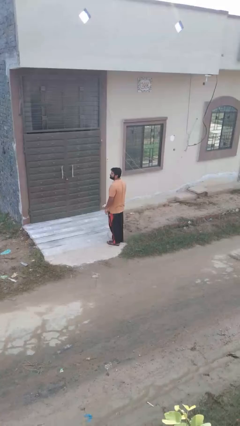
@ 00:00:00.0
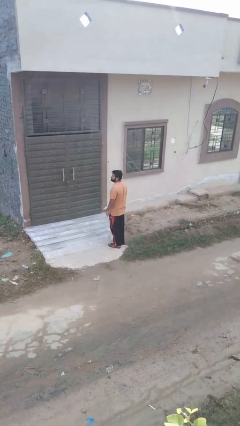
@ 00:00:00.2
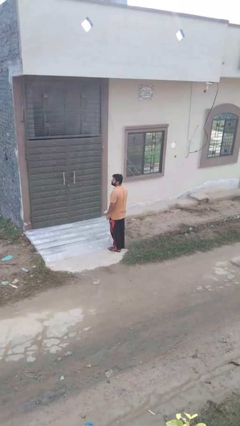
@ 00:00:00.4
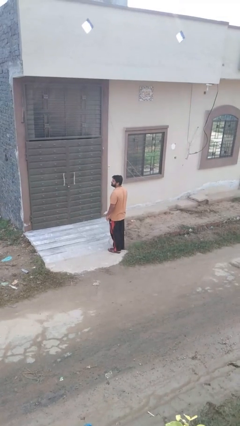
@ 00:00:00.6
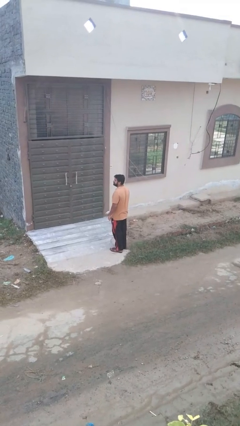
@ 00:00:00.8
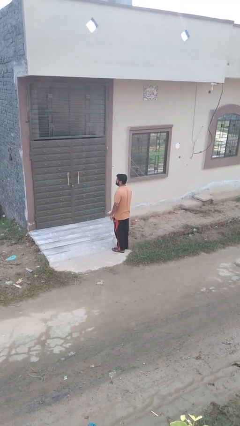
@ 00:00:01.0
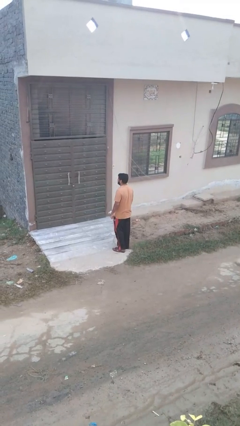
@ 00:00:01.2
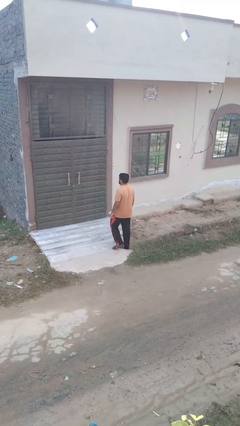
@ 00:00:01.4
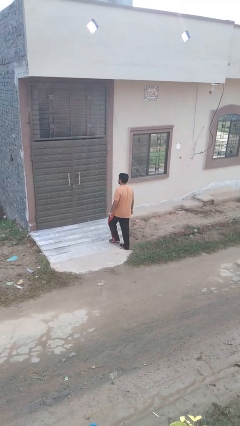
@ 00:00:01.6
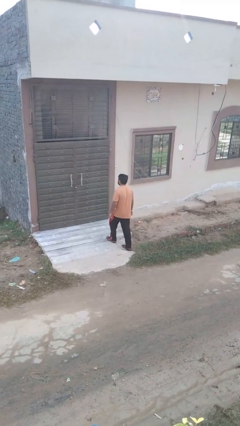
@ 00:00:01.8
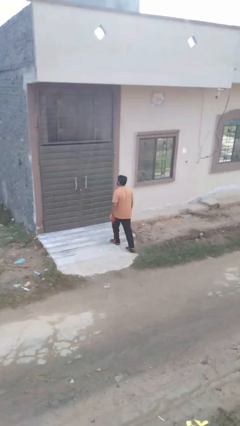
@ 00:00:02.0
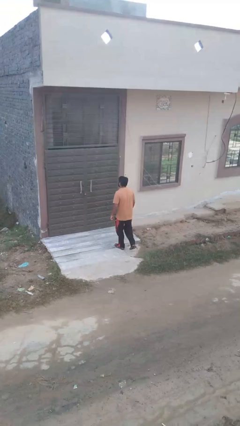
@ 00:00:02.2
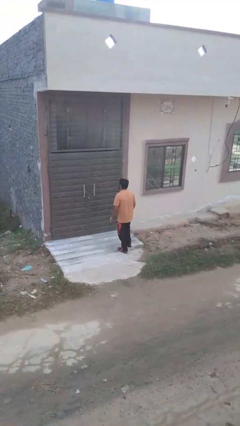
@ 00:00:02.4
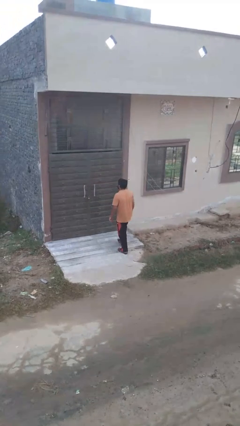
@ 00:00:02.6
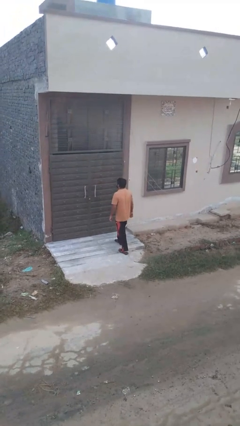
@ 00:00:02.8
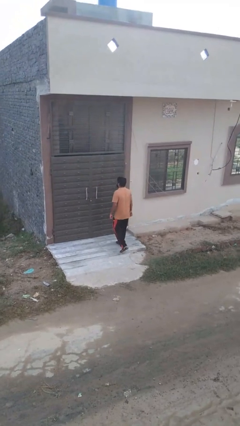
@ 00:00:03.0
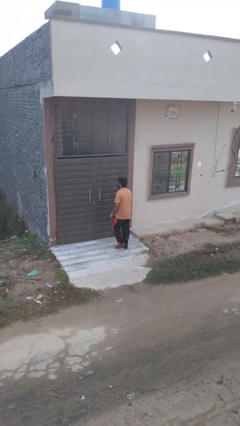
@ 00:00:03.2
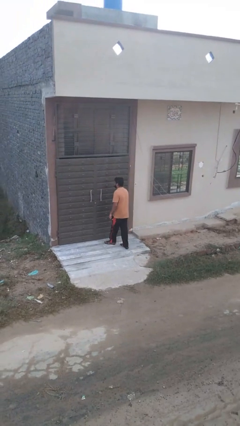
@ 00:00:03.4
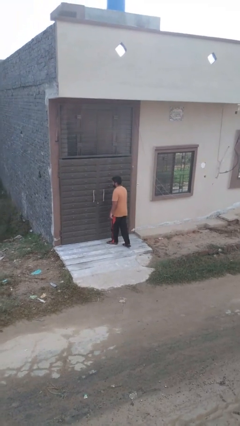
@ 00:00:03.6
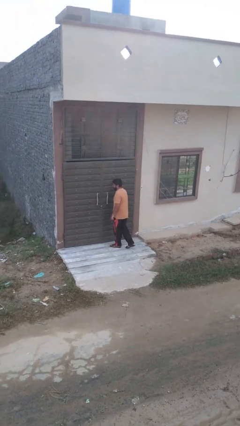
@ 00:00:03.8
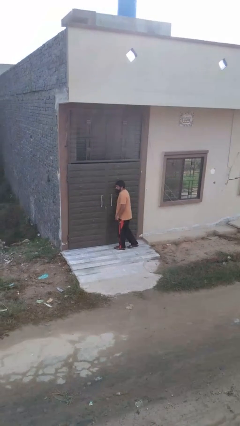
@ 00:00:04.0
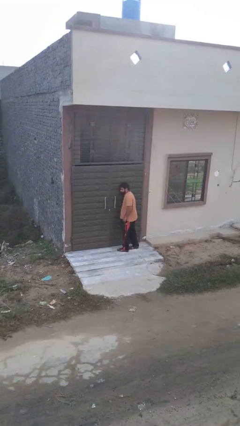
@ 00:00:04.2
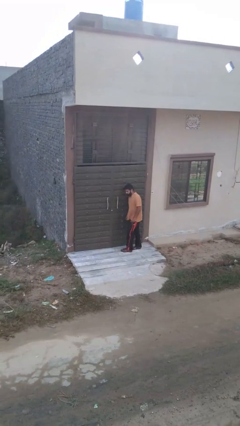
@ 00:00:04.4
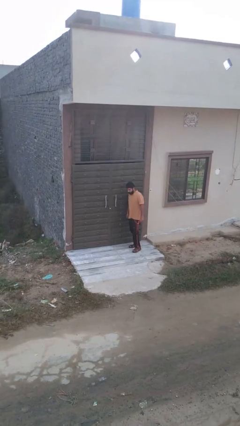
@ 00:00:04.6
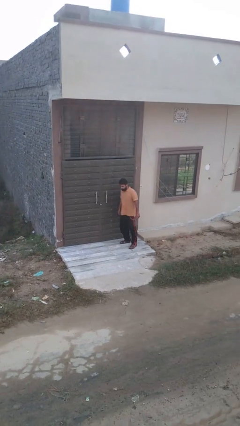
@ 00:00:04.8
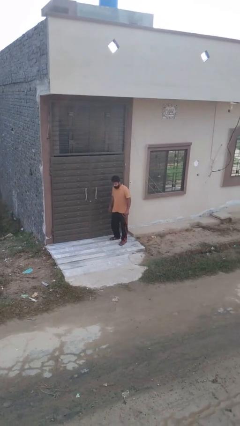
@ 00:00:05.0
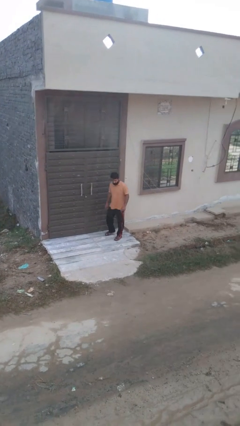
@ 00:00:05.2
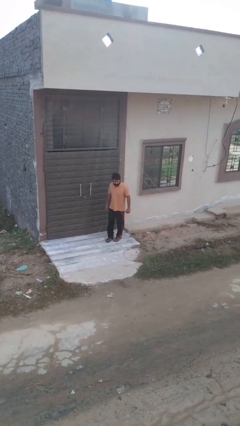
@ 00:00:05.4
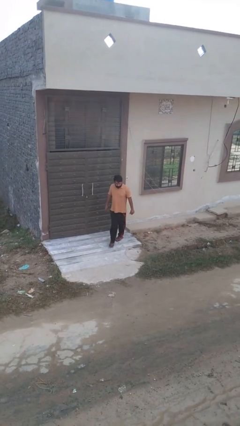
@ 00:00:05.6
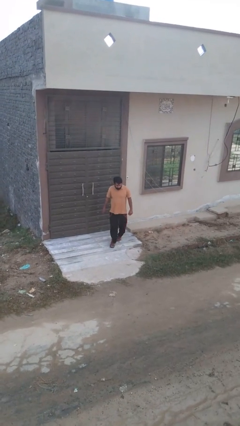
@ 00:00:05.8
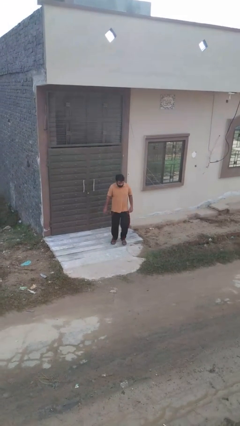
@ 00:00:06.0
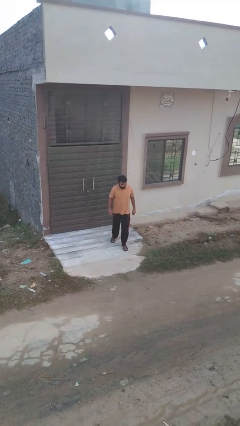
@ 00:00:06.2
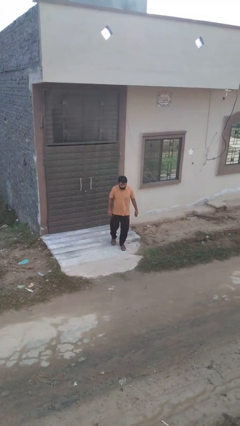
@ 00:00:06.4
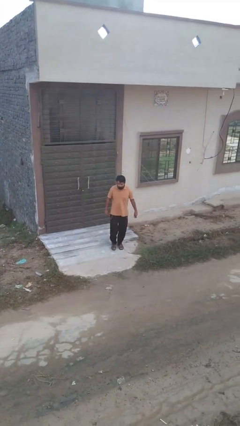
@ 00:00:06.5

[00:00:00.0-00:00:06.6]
person bumps into wall

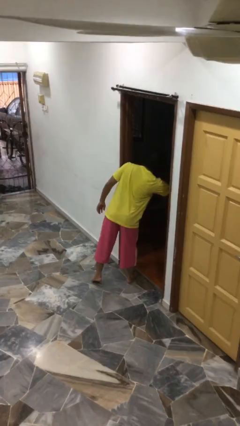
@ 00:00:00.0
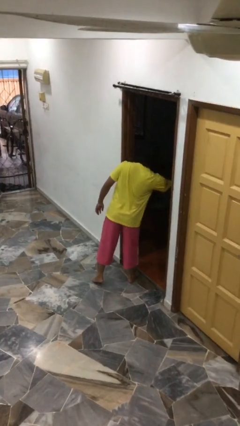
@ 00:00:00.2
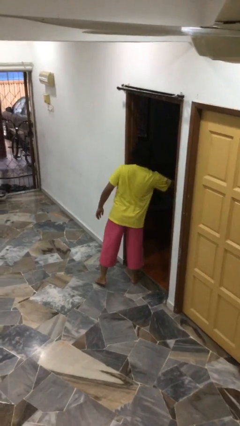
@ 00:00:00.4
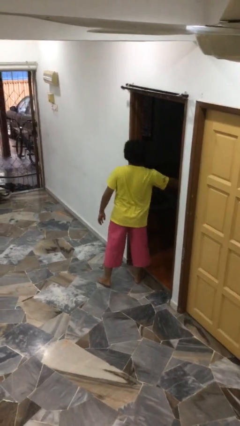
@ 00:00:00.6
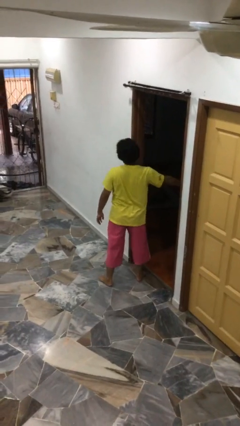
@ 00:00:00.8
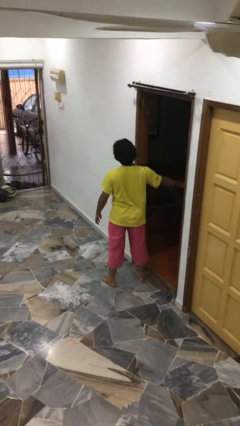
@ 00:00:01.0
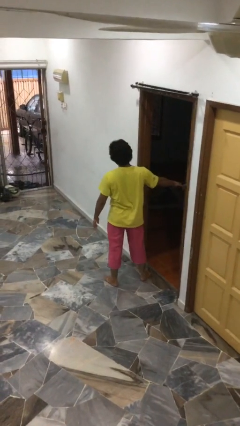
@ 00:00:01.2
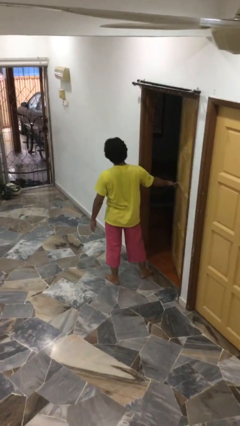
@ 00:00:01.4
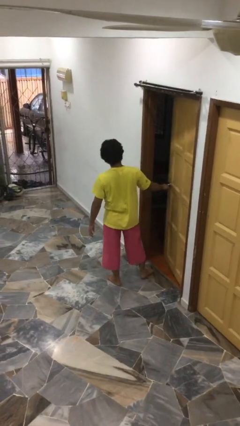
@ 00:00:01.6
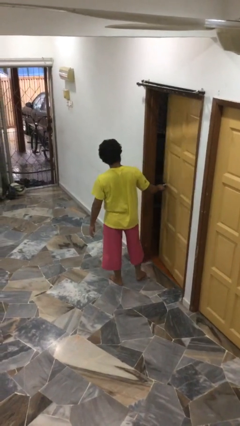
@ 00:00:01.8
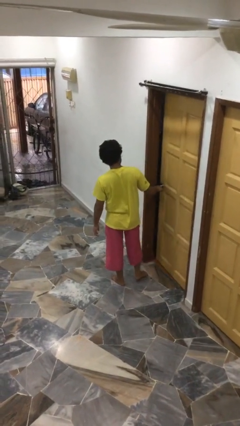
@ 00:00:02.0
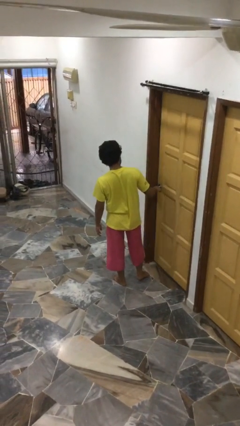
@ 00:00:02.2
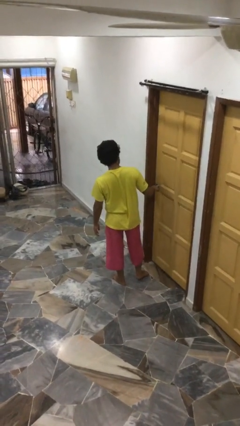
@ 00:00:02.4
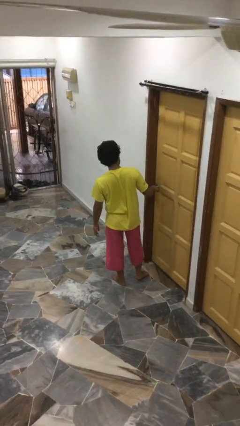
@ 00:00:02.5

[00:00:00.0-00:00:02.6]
person closes facility door

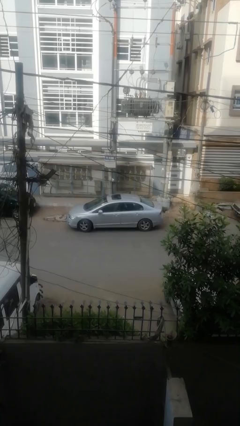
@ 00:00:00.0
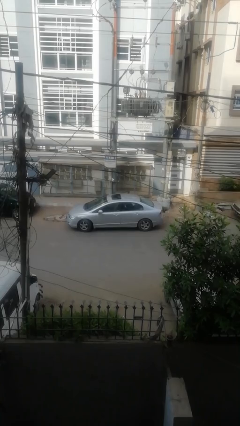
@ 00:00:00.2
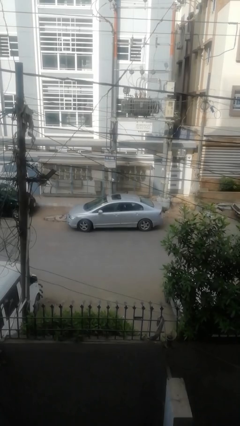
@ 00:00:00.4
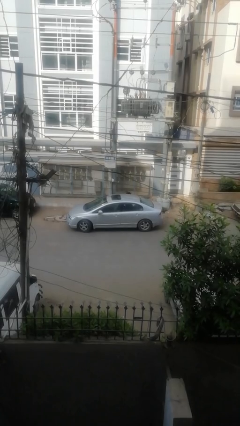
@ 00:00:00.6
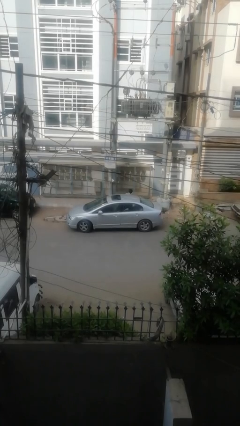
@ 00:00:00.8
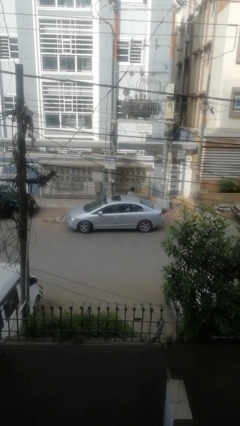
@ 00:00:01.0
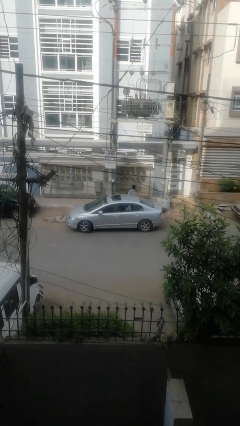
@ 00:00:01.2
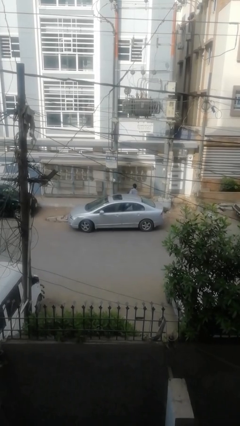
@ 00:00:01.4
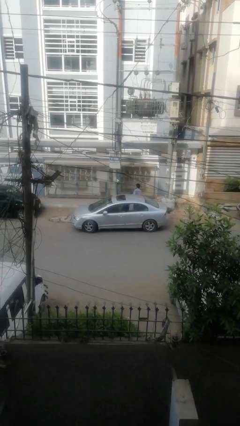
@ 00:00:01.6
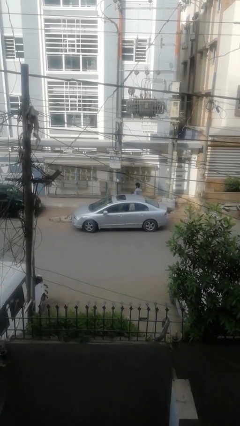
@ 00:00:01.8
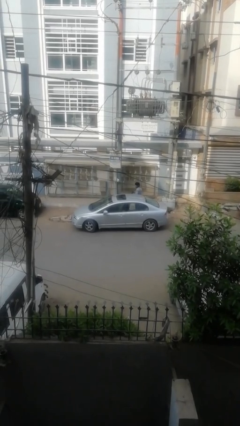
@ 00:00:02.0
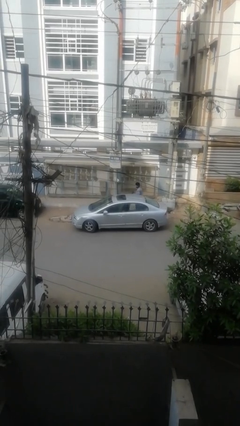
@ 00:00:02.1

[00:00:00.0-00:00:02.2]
car drops off person

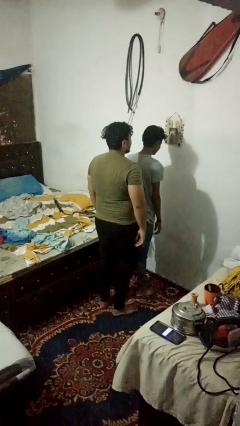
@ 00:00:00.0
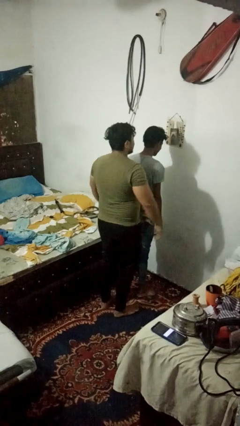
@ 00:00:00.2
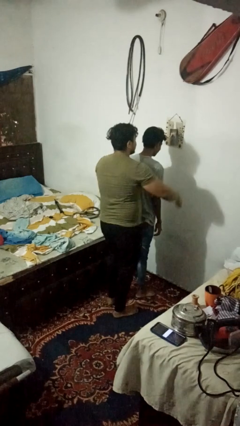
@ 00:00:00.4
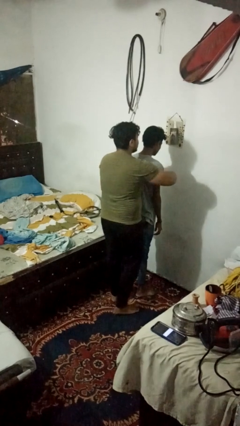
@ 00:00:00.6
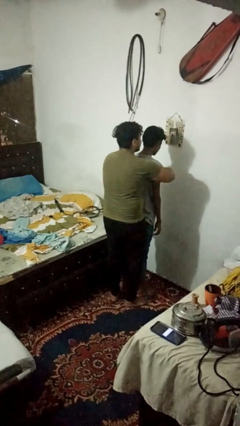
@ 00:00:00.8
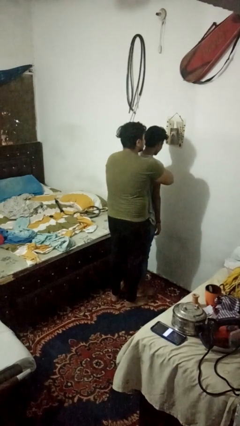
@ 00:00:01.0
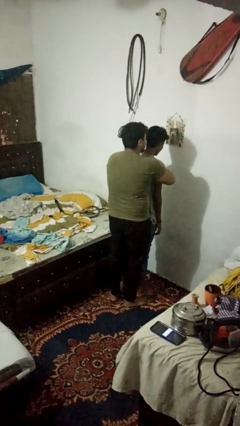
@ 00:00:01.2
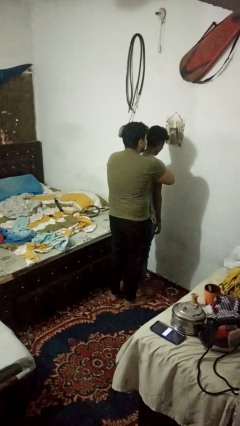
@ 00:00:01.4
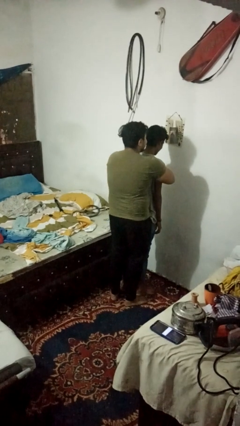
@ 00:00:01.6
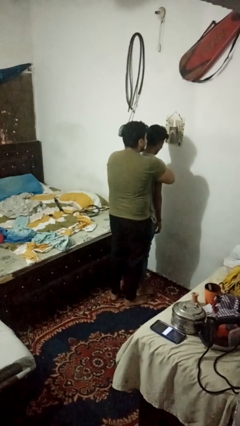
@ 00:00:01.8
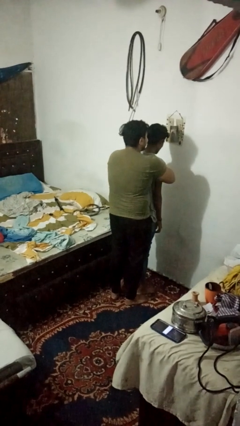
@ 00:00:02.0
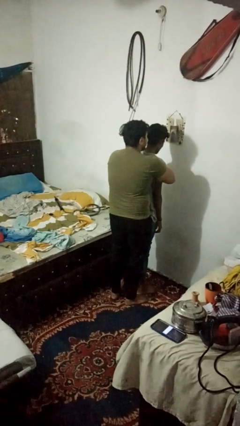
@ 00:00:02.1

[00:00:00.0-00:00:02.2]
person hugs person from behind

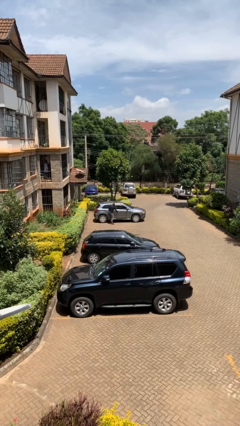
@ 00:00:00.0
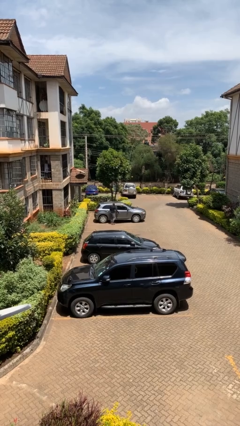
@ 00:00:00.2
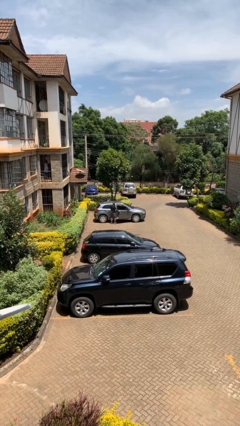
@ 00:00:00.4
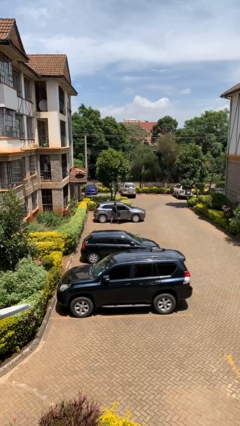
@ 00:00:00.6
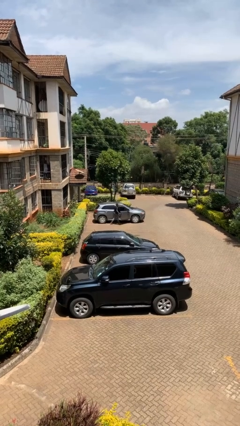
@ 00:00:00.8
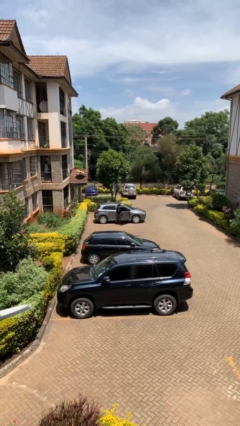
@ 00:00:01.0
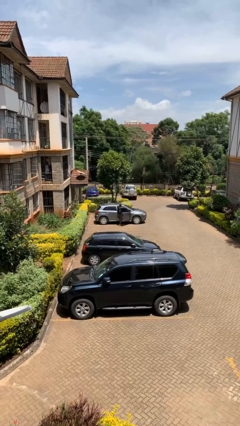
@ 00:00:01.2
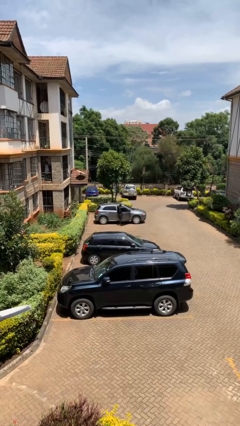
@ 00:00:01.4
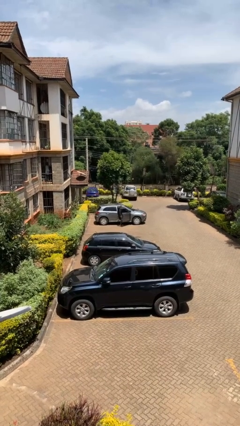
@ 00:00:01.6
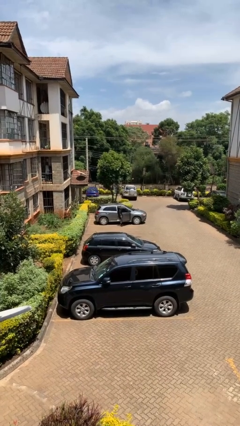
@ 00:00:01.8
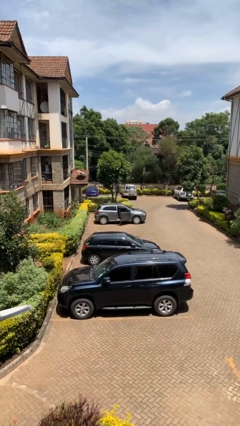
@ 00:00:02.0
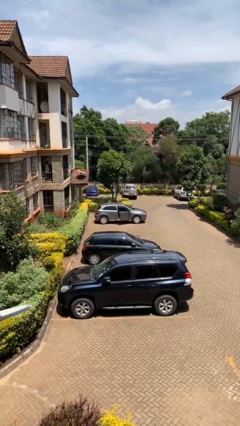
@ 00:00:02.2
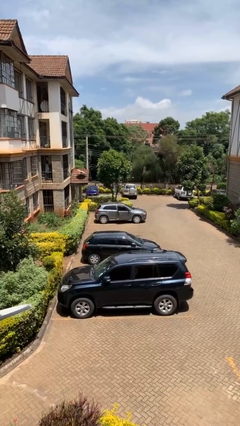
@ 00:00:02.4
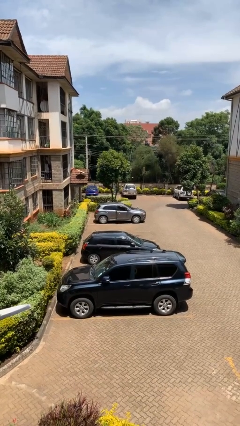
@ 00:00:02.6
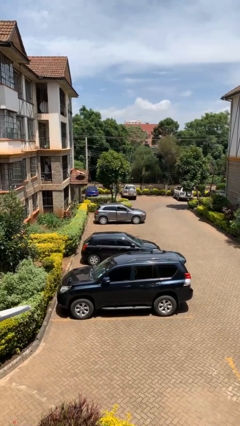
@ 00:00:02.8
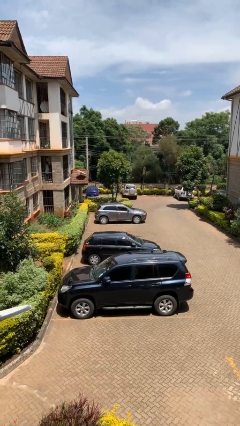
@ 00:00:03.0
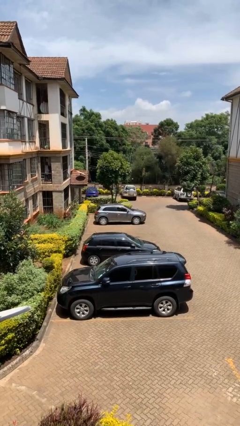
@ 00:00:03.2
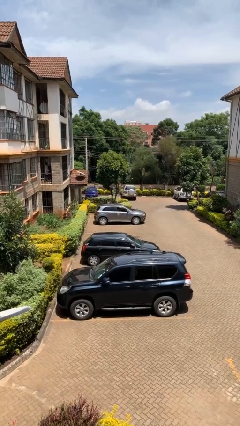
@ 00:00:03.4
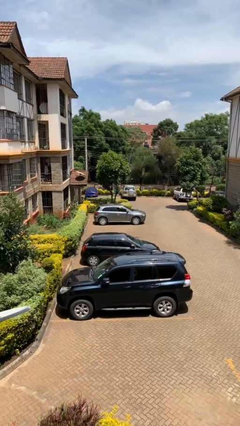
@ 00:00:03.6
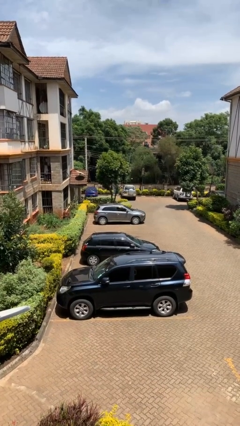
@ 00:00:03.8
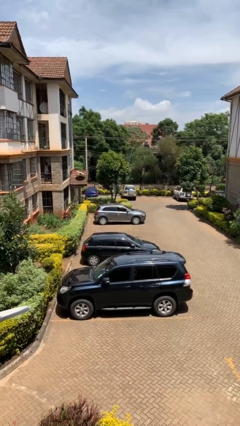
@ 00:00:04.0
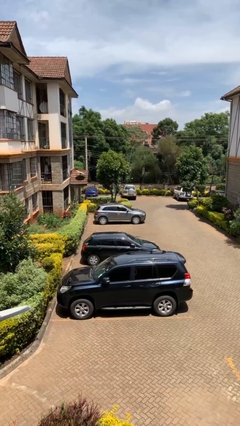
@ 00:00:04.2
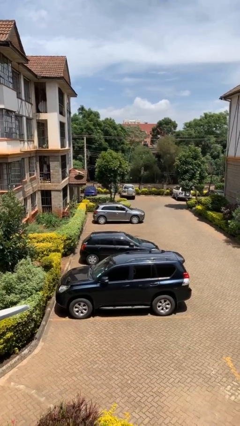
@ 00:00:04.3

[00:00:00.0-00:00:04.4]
car picks up person
